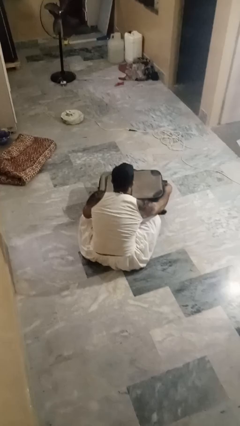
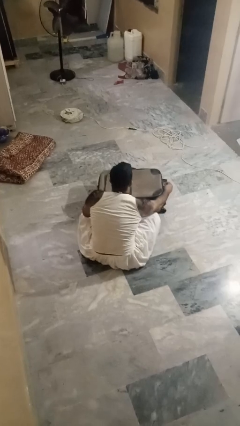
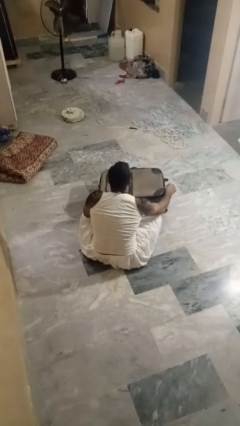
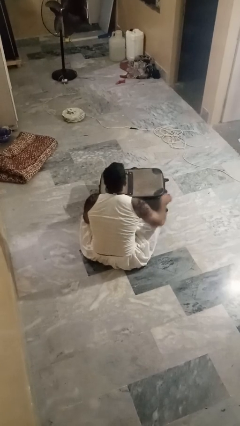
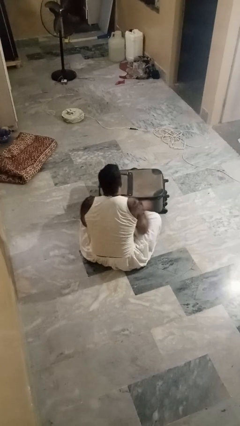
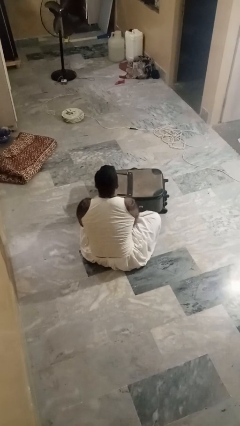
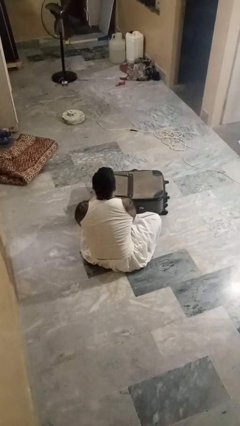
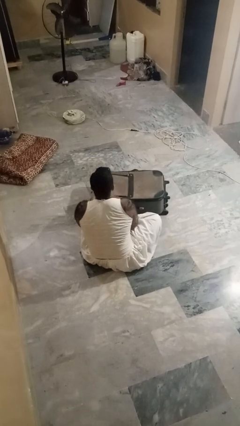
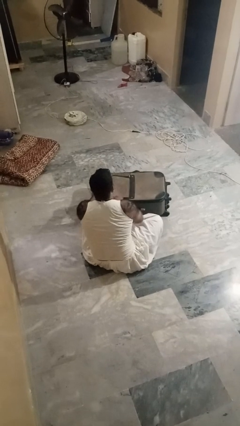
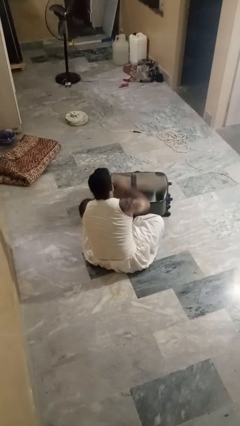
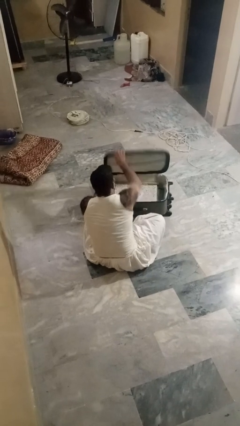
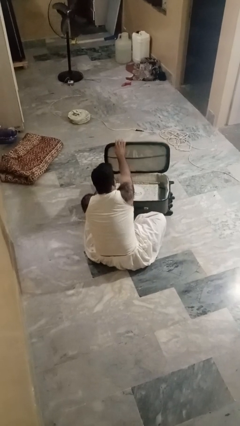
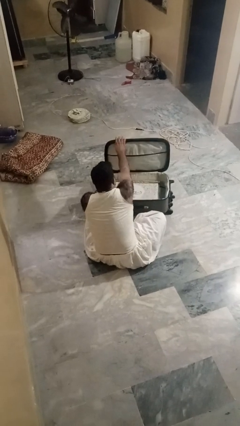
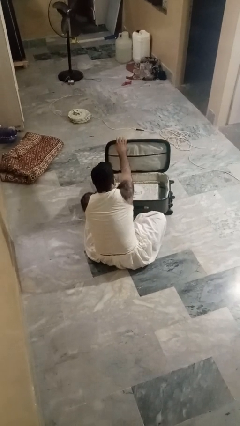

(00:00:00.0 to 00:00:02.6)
person opens suitcase

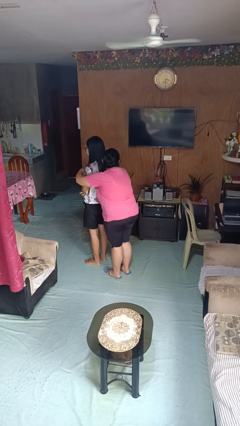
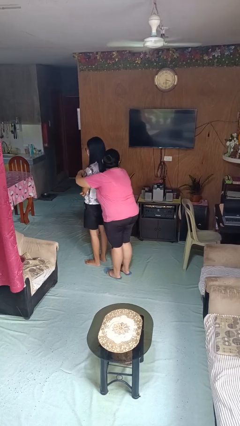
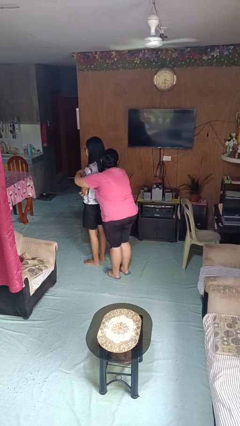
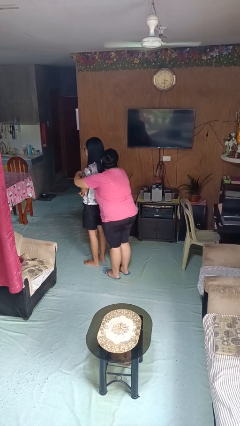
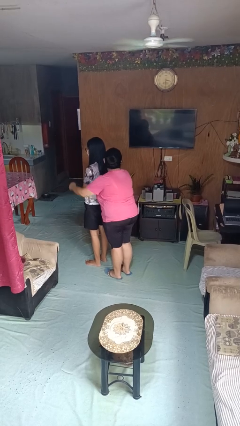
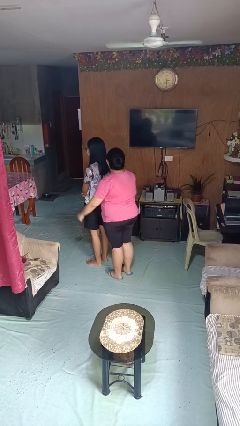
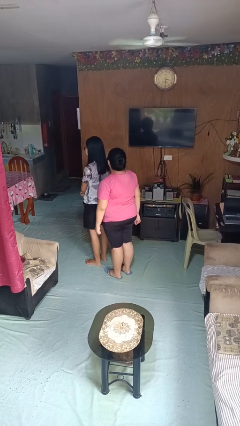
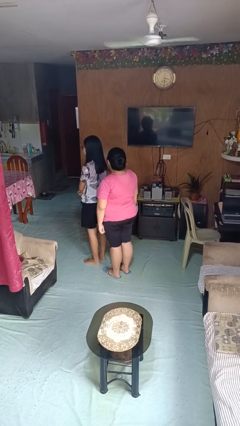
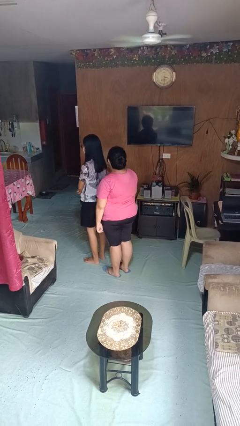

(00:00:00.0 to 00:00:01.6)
person hugs person from behind

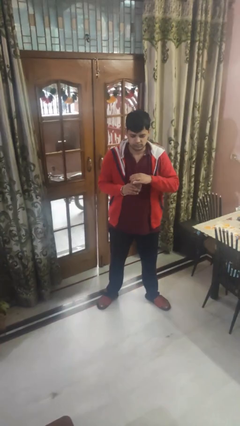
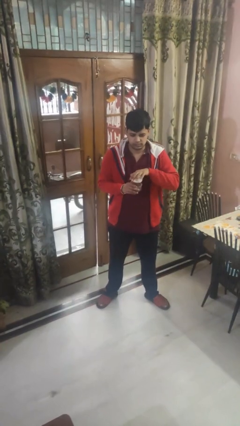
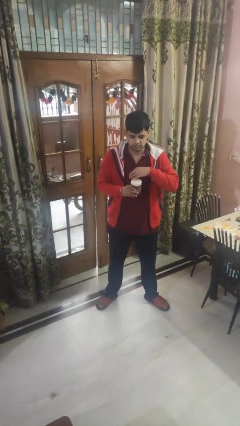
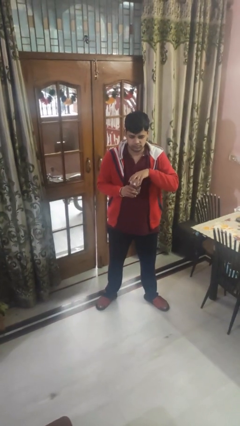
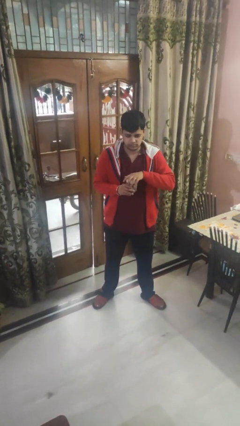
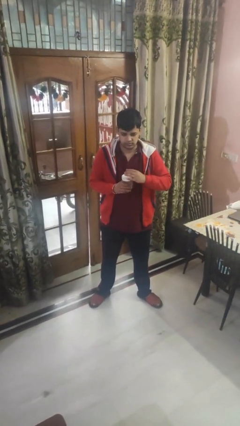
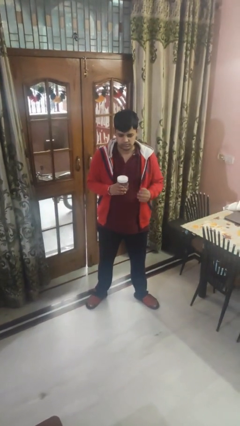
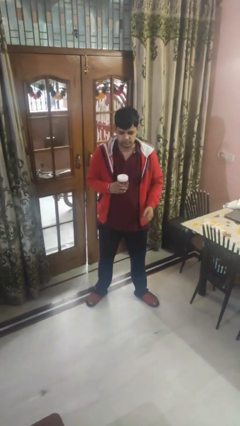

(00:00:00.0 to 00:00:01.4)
person closes jar

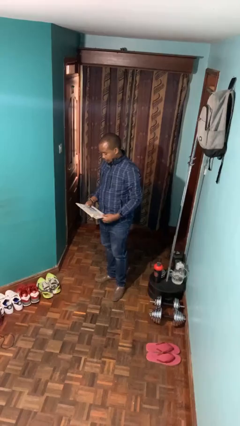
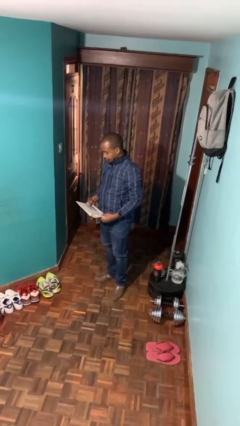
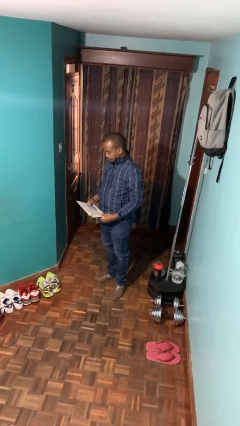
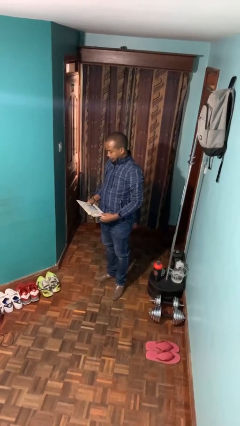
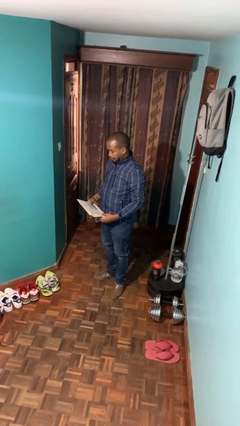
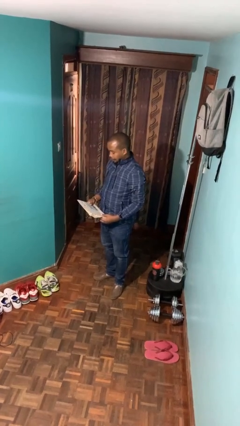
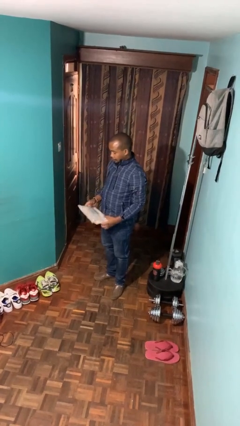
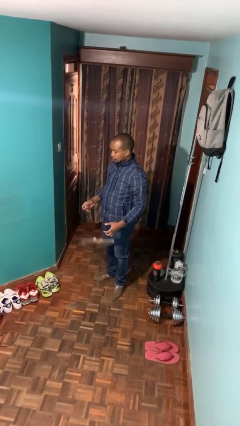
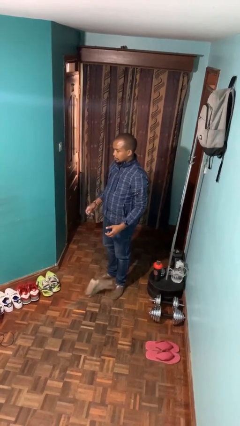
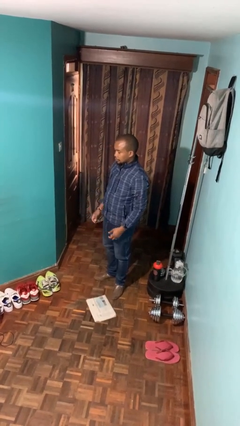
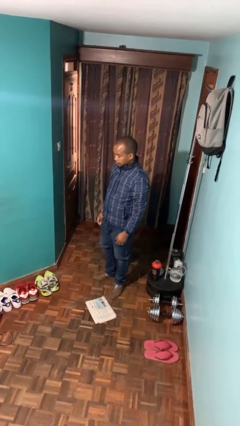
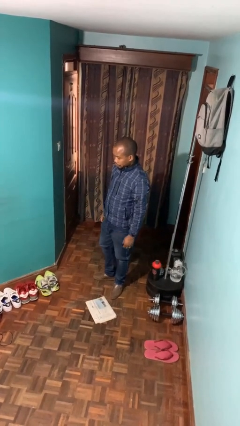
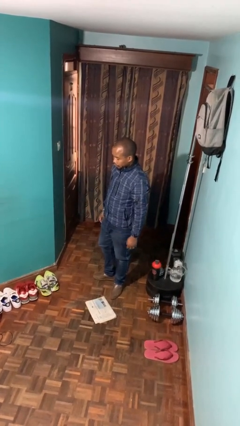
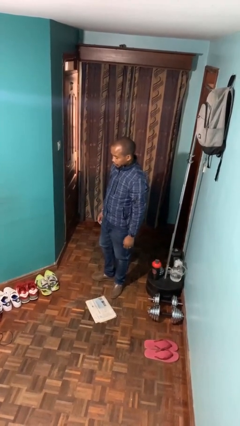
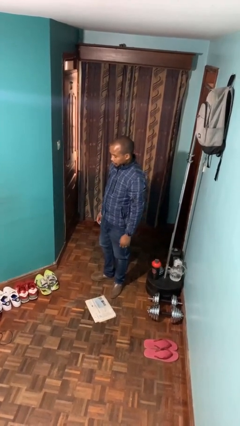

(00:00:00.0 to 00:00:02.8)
person drops object

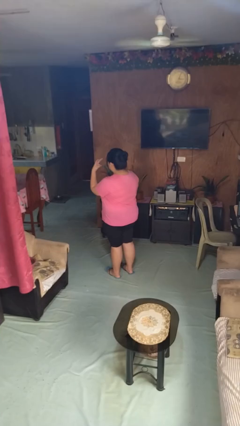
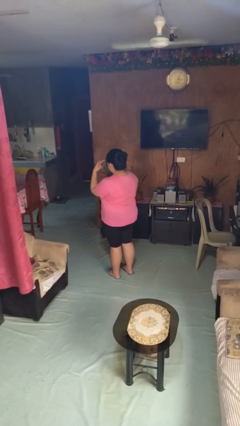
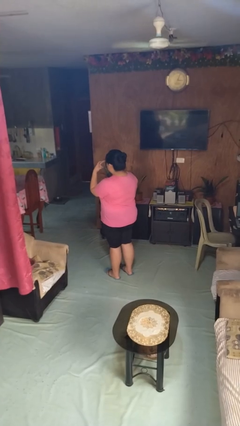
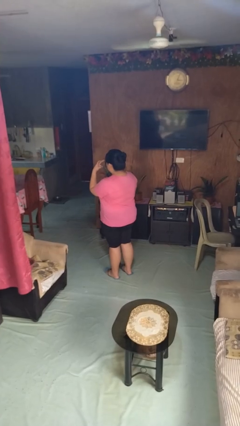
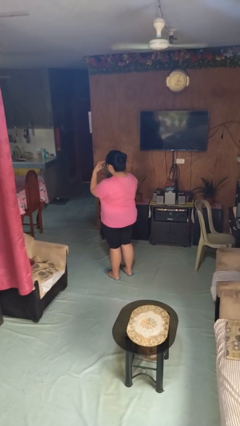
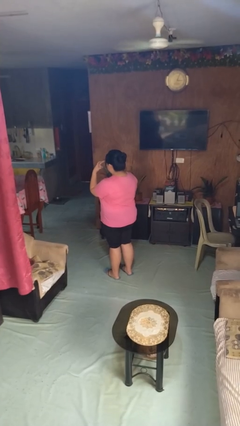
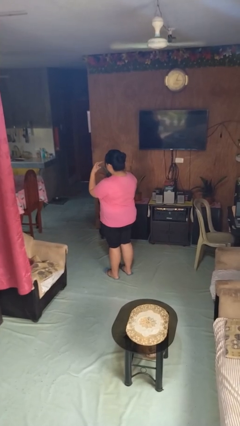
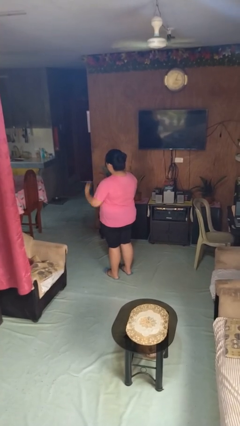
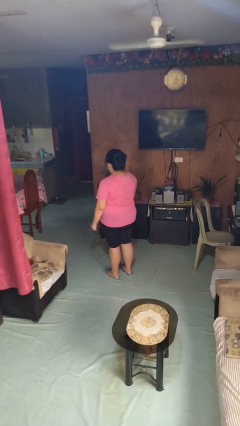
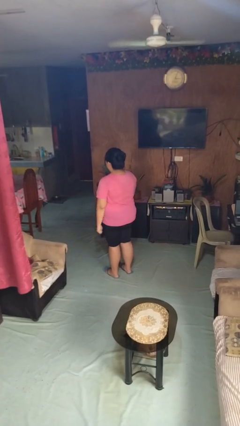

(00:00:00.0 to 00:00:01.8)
person gestures watch closely

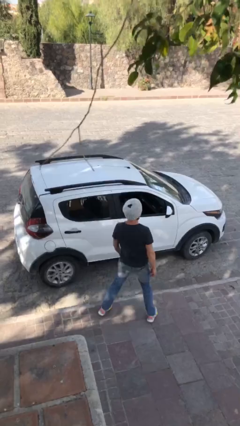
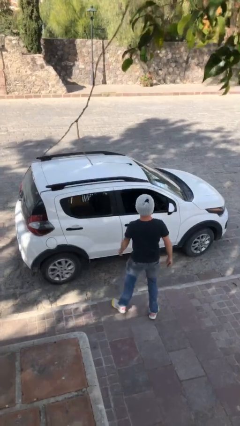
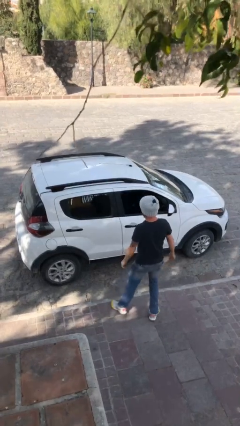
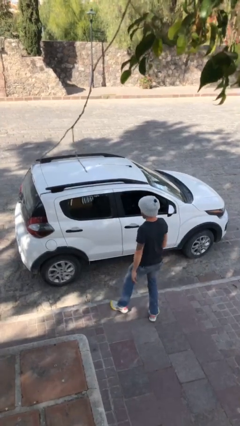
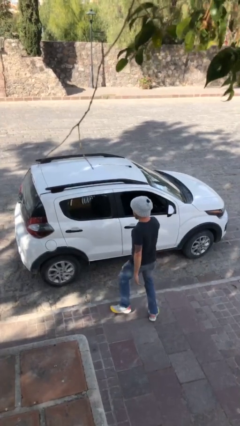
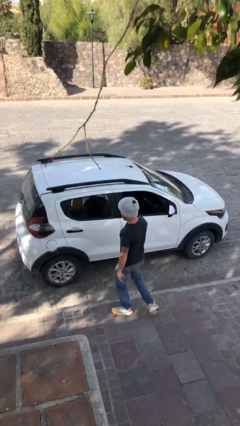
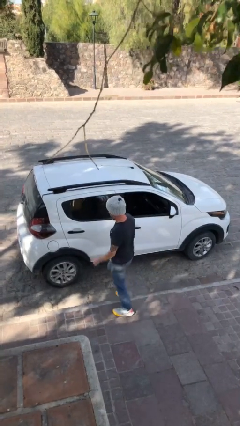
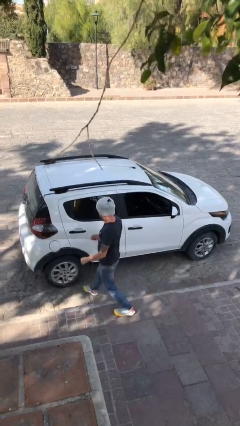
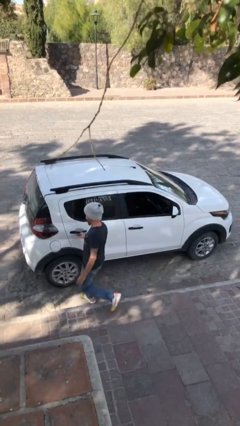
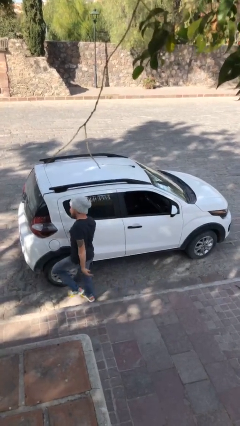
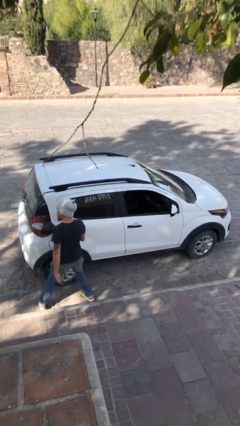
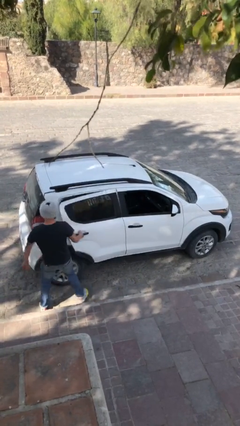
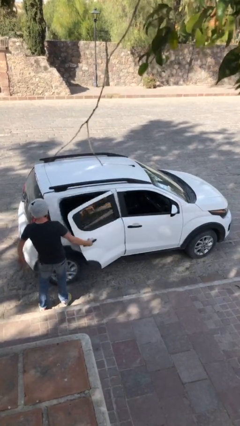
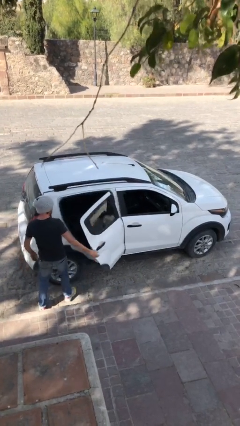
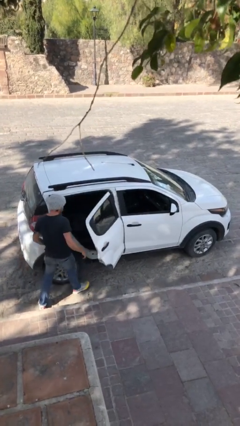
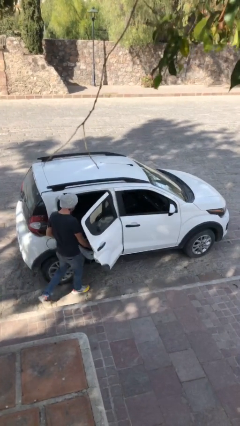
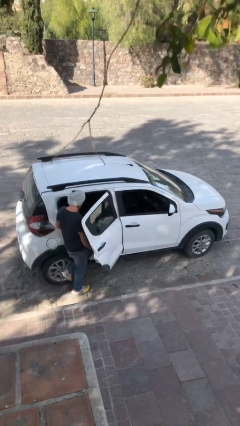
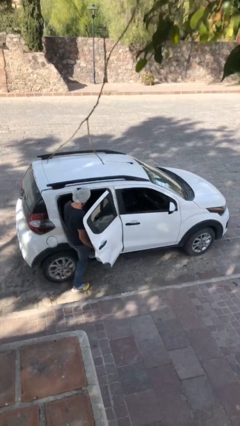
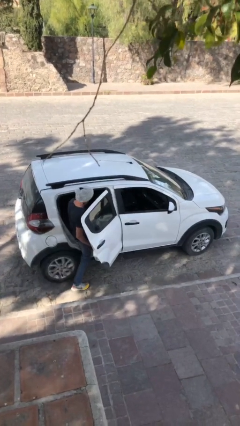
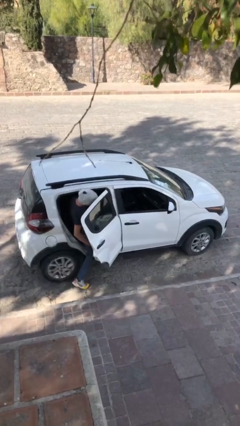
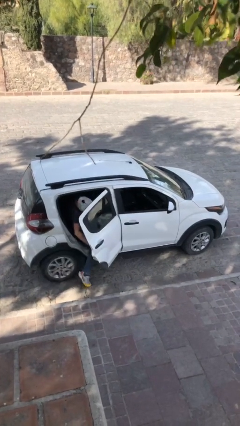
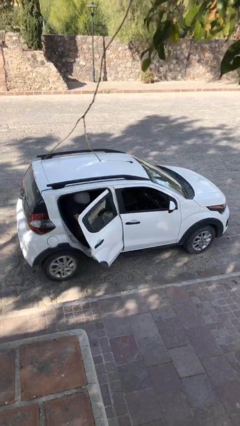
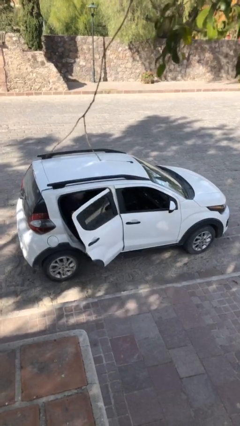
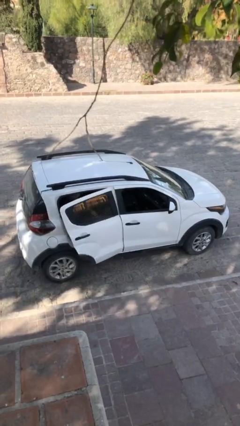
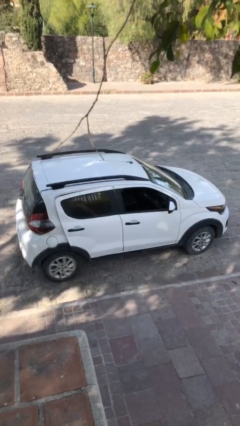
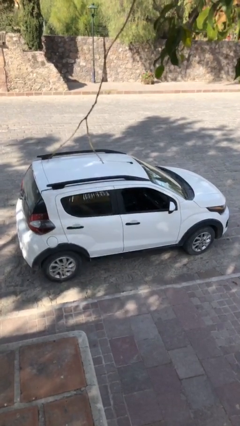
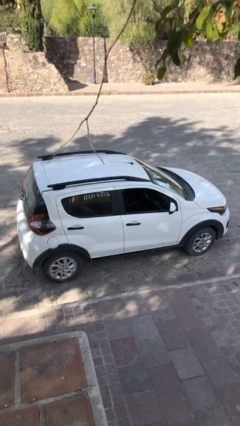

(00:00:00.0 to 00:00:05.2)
car picks up person

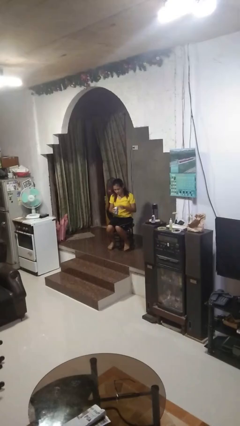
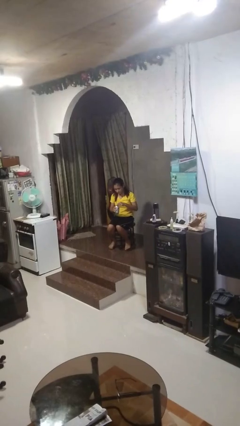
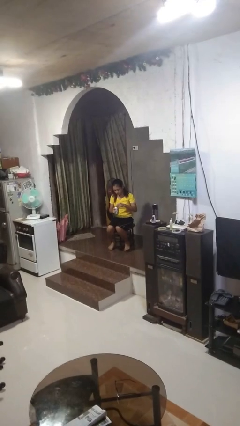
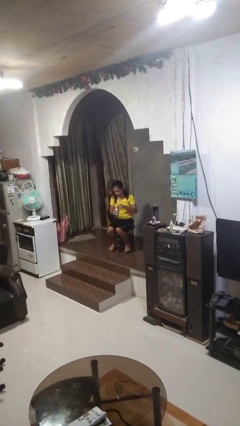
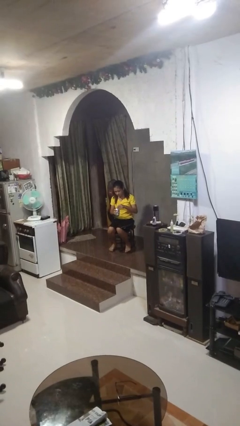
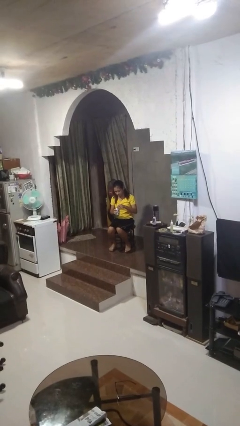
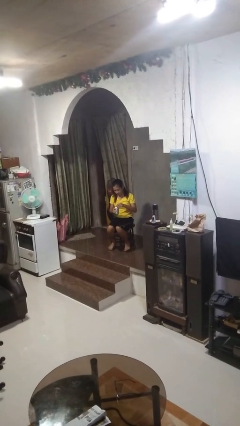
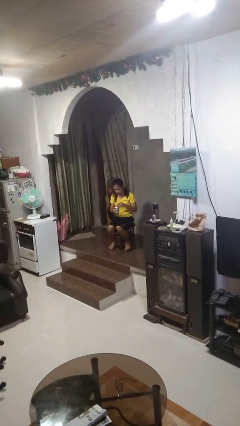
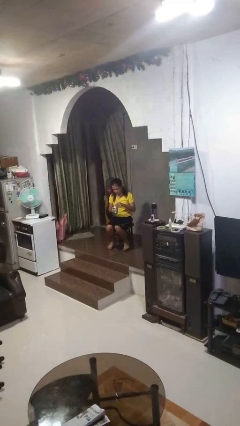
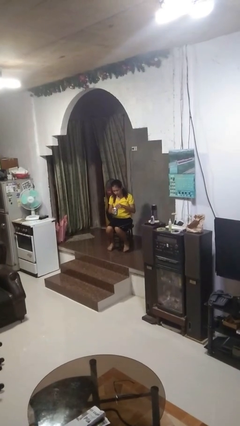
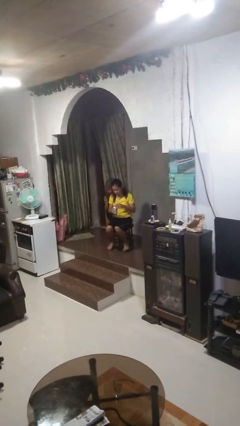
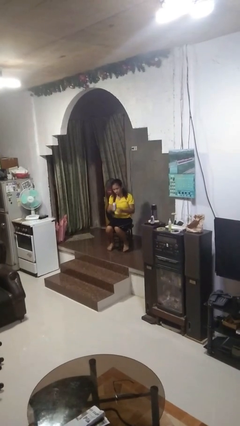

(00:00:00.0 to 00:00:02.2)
person opens beverage can
